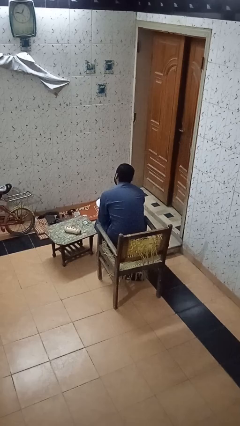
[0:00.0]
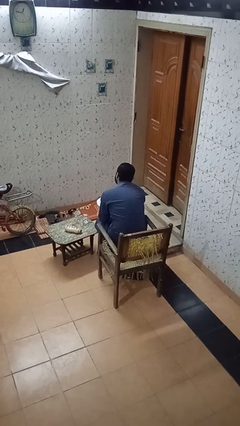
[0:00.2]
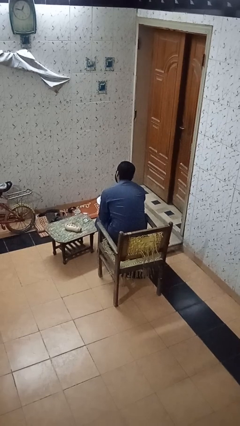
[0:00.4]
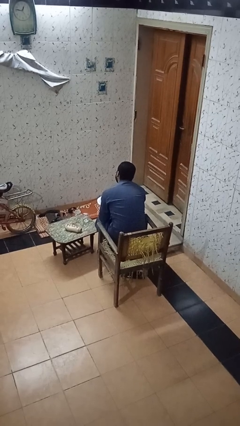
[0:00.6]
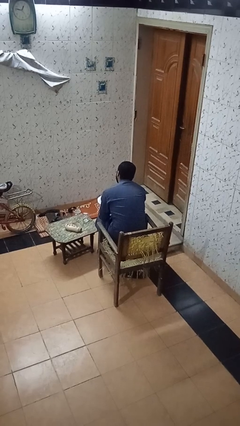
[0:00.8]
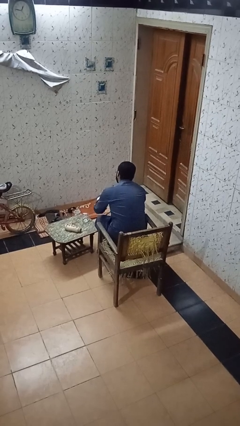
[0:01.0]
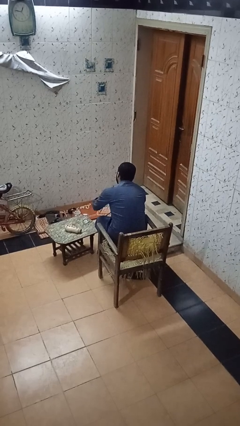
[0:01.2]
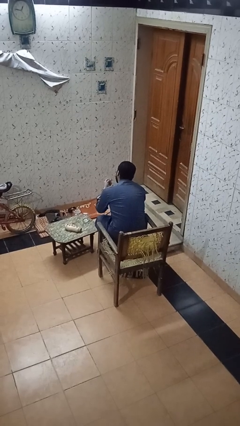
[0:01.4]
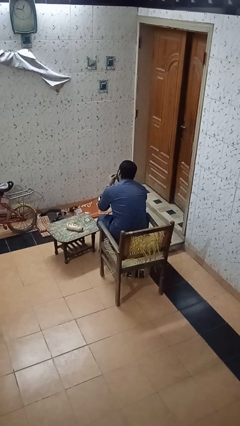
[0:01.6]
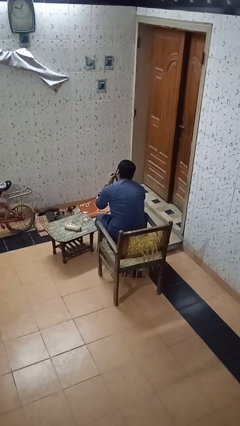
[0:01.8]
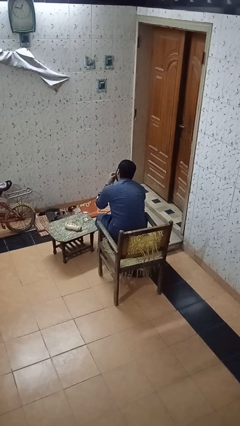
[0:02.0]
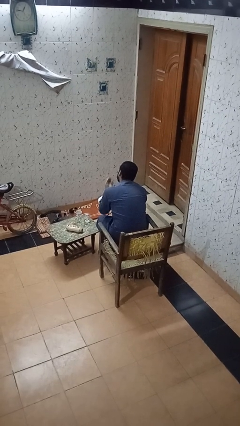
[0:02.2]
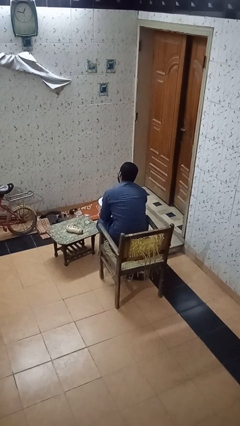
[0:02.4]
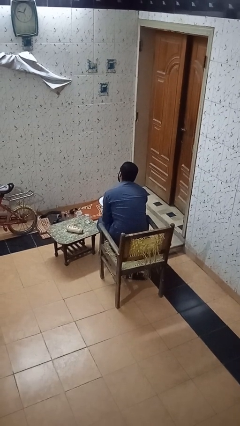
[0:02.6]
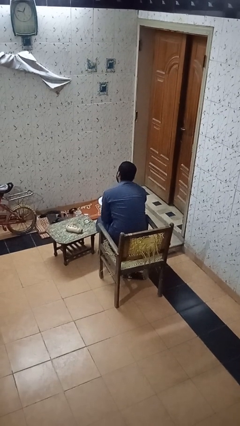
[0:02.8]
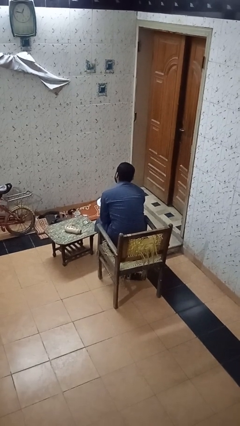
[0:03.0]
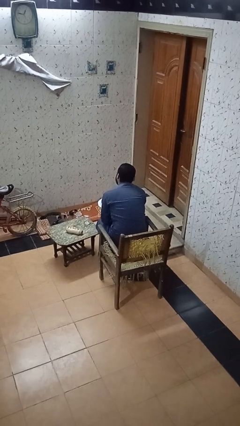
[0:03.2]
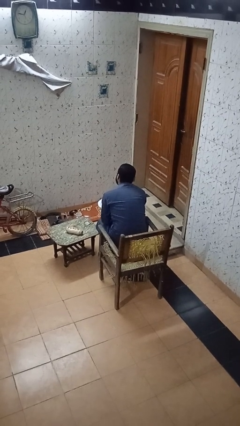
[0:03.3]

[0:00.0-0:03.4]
person eats with hands

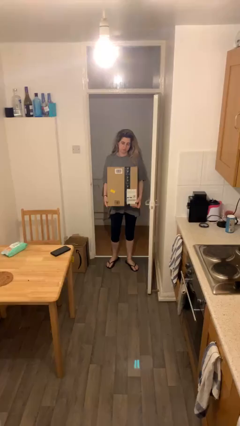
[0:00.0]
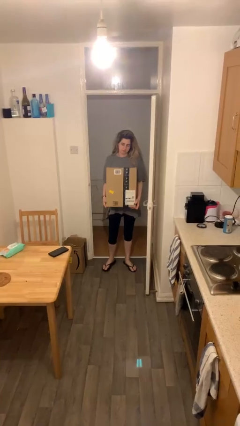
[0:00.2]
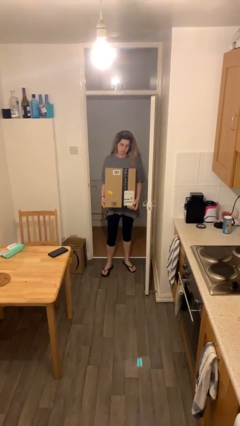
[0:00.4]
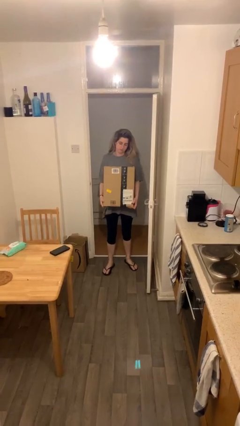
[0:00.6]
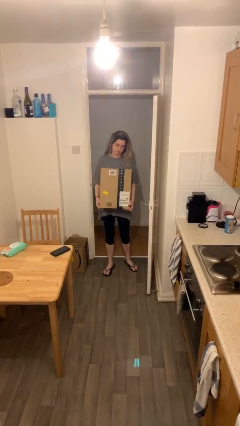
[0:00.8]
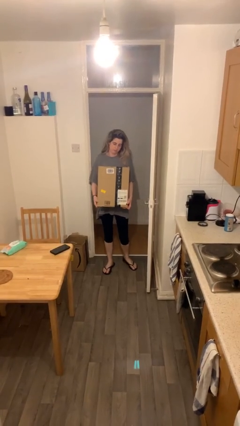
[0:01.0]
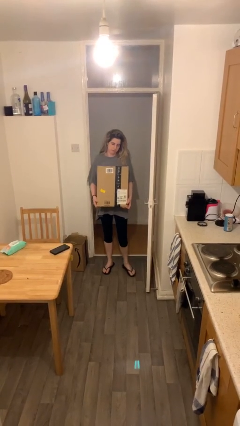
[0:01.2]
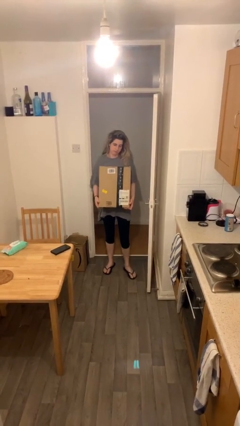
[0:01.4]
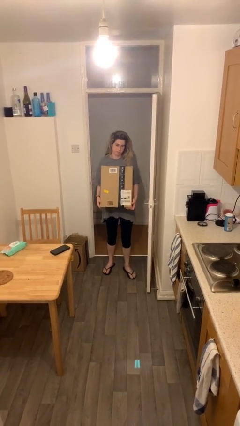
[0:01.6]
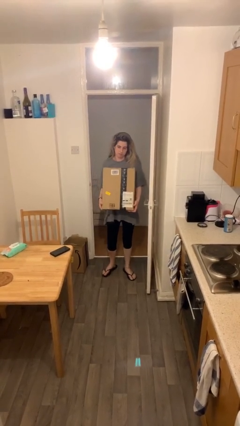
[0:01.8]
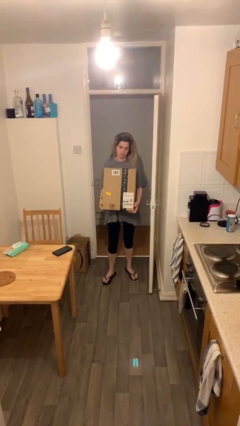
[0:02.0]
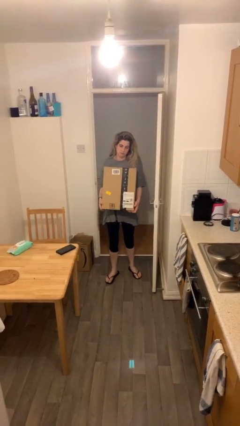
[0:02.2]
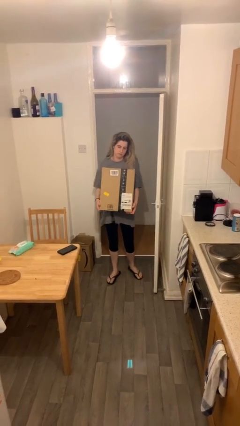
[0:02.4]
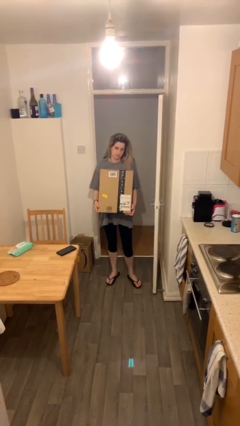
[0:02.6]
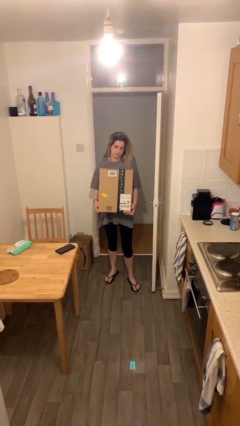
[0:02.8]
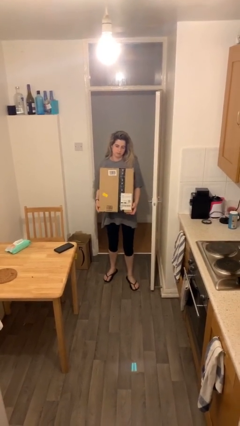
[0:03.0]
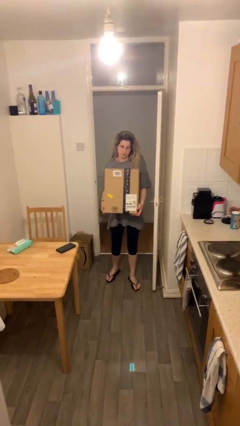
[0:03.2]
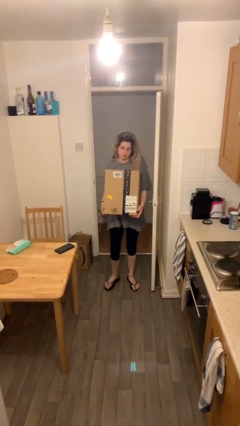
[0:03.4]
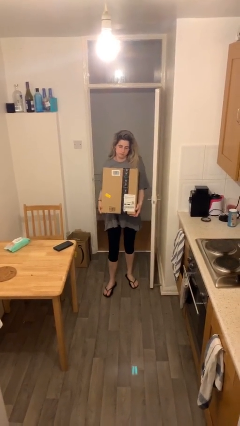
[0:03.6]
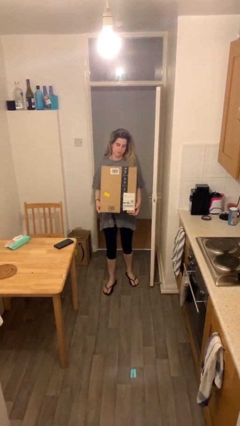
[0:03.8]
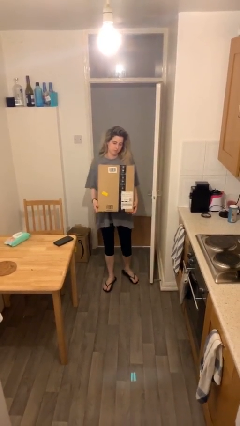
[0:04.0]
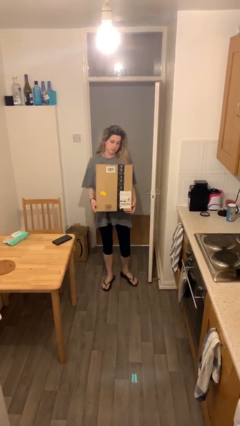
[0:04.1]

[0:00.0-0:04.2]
person carries heavy object

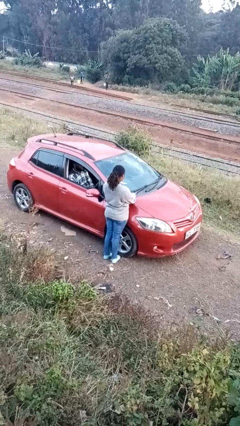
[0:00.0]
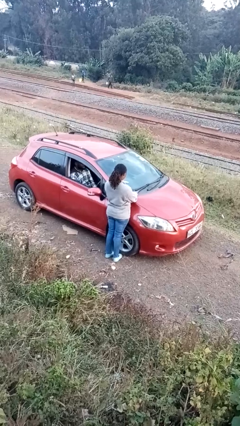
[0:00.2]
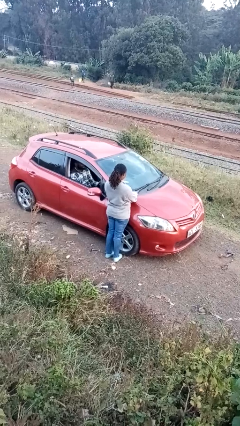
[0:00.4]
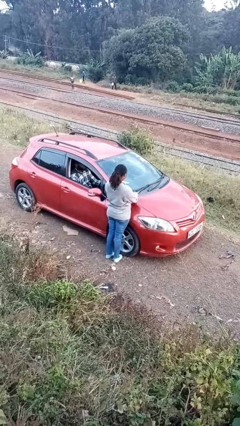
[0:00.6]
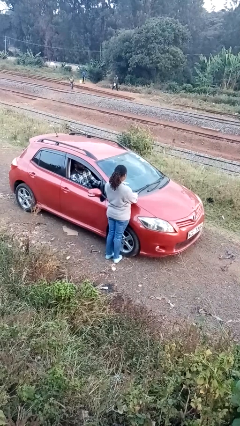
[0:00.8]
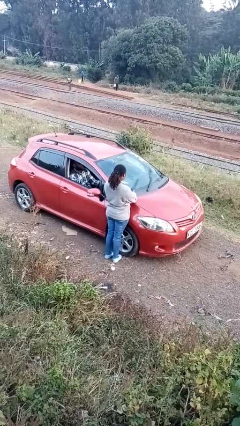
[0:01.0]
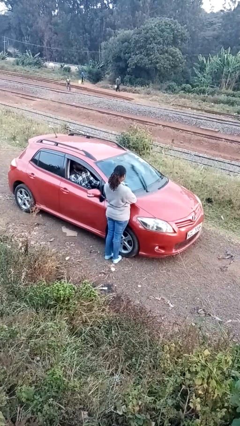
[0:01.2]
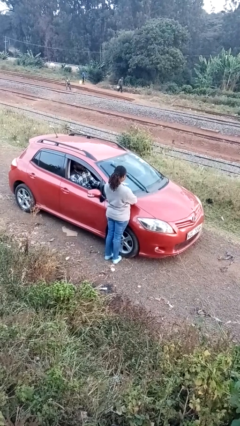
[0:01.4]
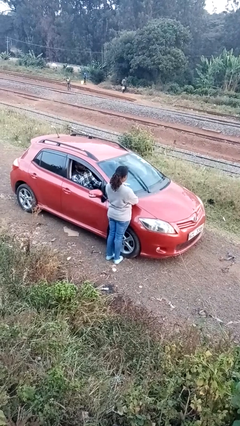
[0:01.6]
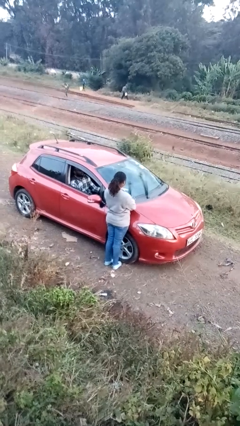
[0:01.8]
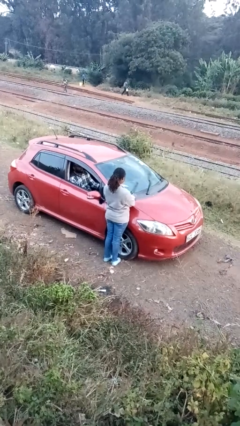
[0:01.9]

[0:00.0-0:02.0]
person flips up car wipers

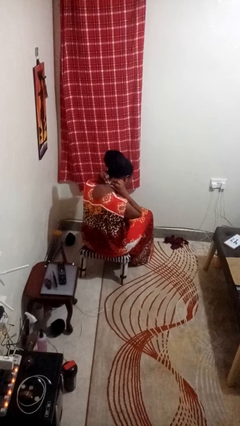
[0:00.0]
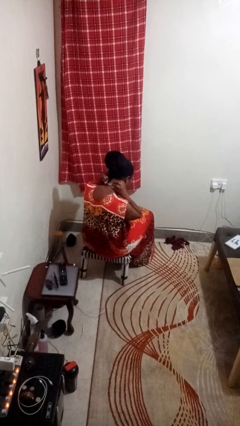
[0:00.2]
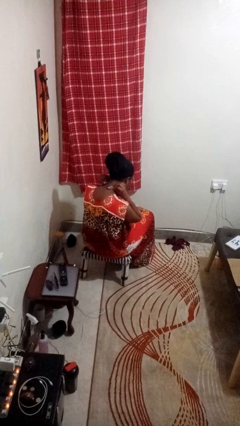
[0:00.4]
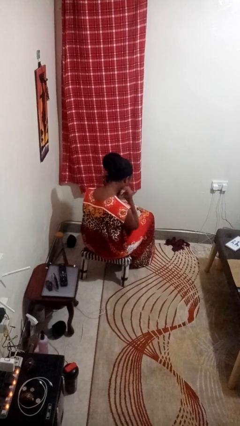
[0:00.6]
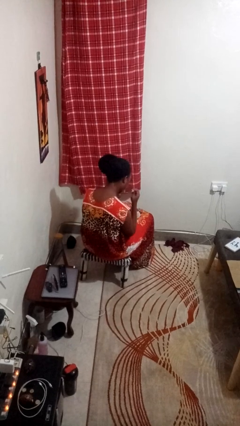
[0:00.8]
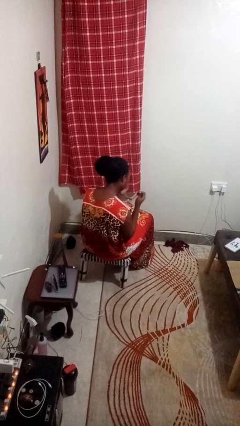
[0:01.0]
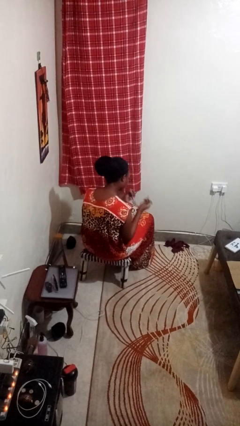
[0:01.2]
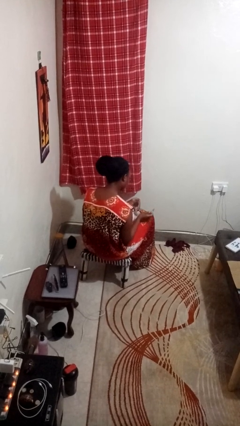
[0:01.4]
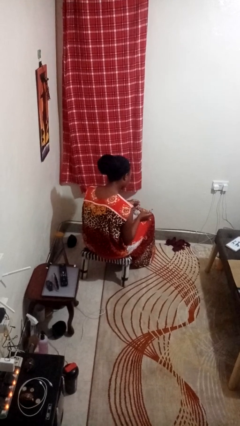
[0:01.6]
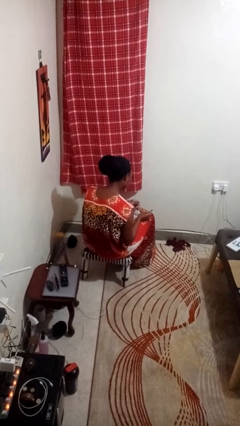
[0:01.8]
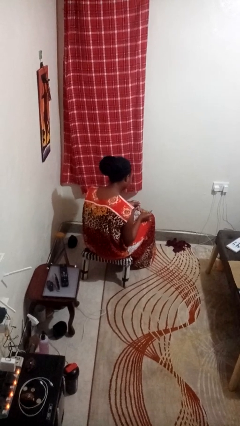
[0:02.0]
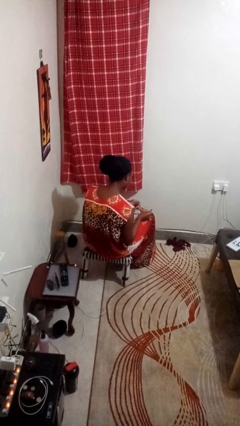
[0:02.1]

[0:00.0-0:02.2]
person takes off necklace

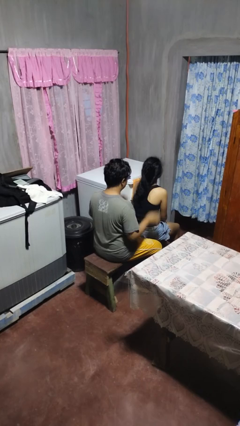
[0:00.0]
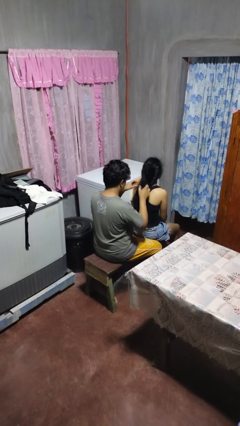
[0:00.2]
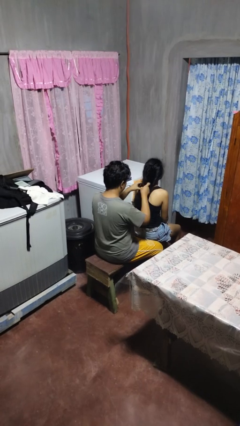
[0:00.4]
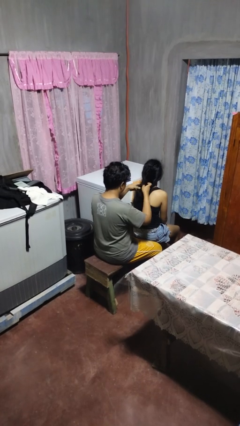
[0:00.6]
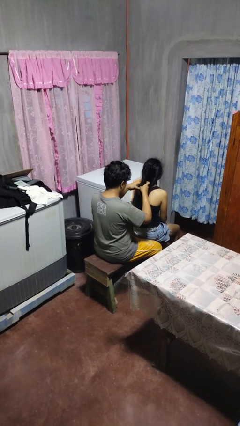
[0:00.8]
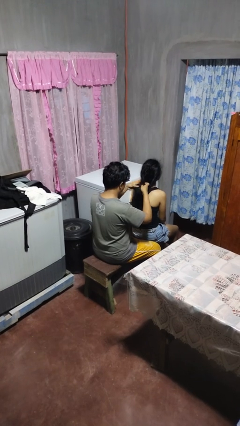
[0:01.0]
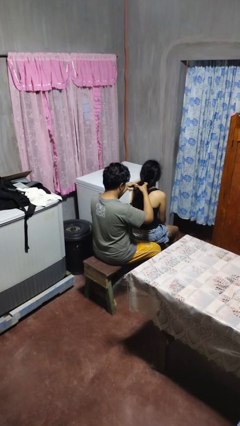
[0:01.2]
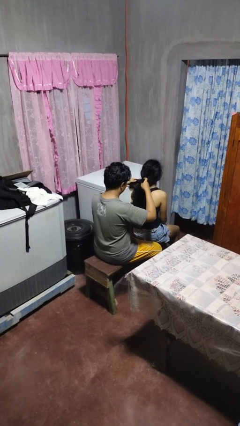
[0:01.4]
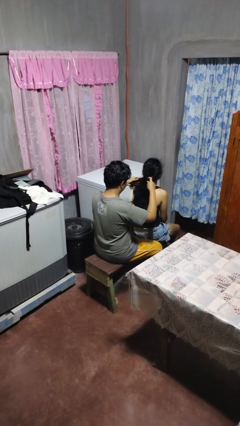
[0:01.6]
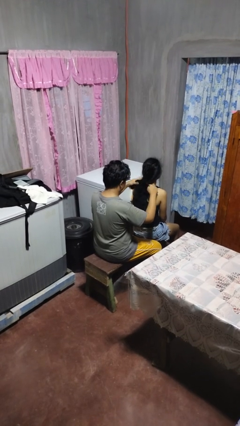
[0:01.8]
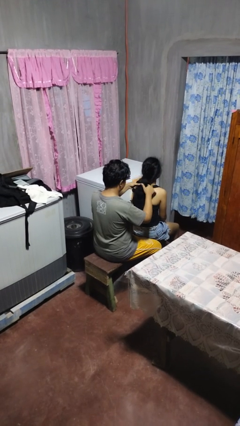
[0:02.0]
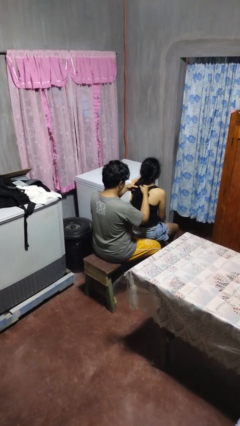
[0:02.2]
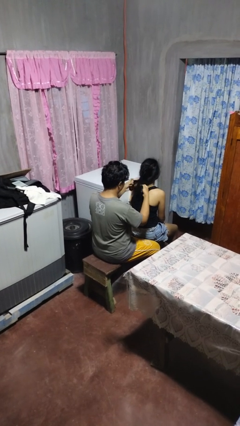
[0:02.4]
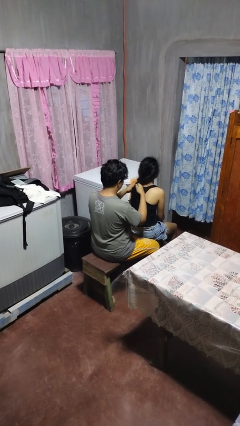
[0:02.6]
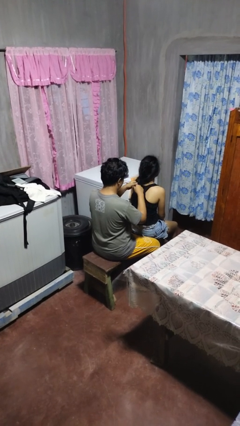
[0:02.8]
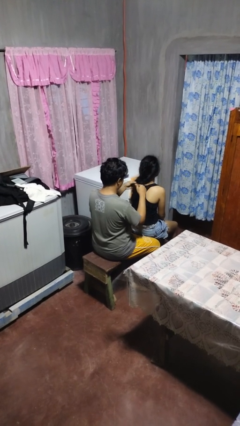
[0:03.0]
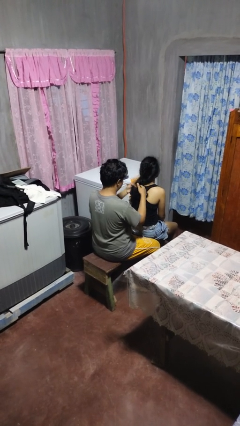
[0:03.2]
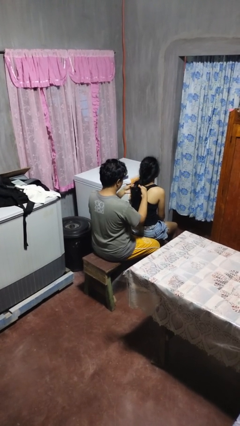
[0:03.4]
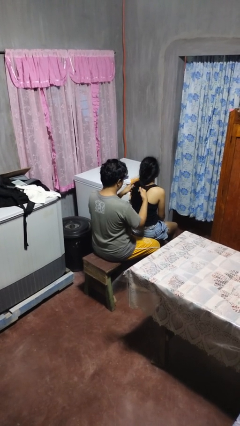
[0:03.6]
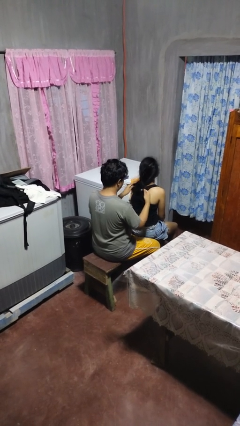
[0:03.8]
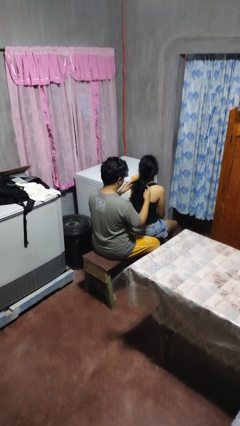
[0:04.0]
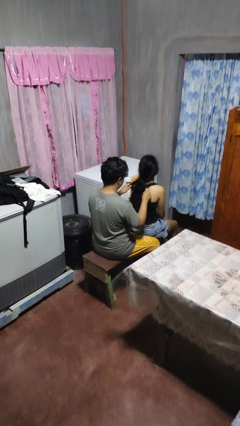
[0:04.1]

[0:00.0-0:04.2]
person braids hair of person

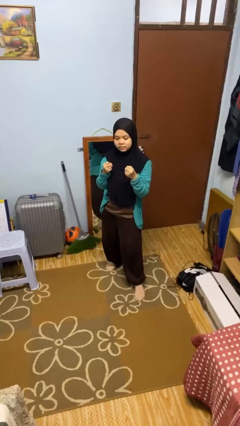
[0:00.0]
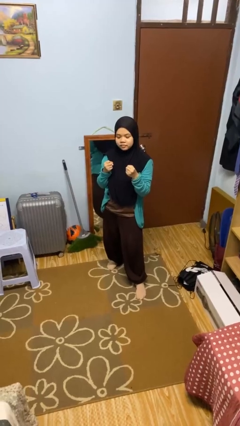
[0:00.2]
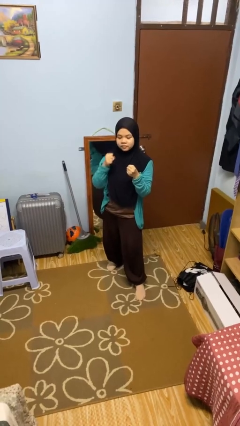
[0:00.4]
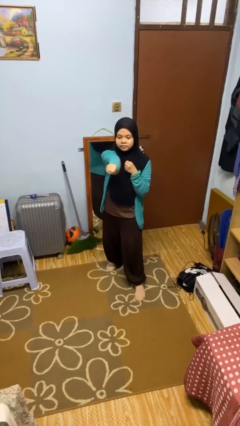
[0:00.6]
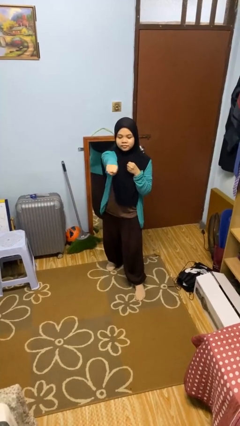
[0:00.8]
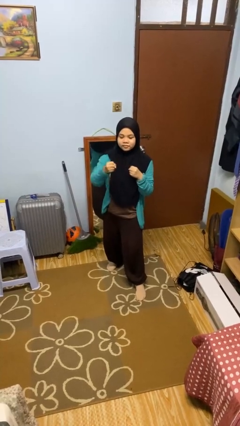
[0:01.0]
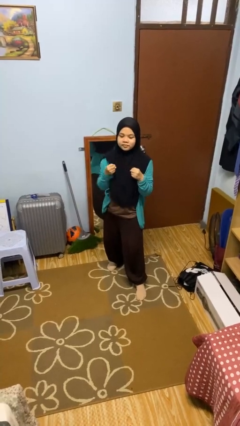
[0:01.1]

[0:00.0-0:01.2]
person punches

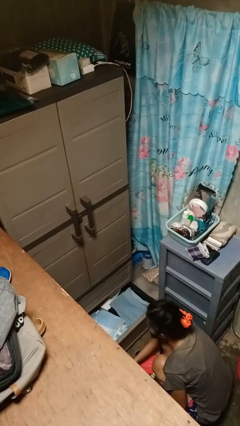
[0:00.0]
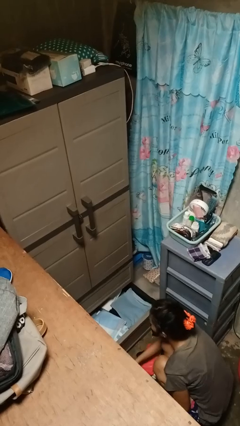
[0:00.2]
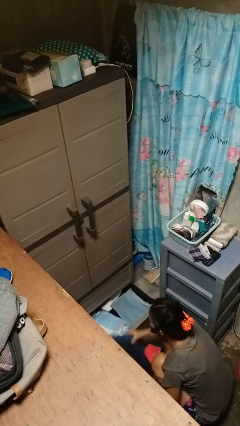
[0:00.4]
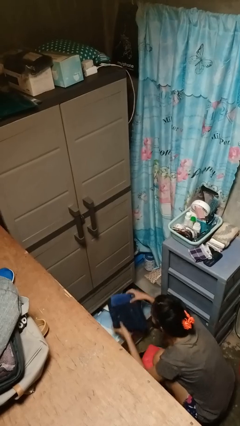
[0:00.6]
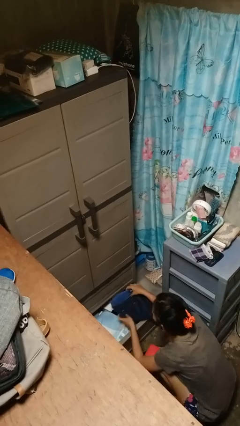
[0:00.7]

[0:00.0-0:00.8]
person puts clothes into dresser
